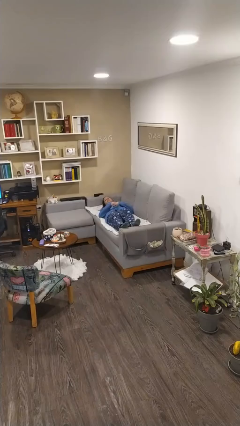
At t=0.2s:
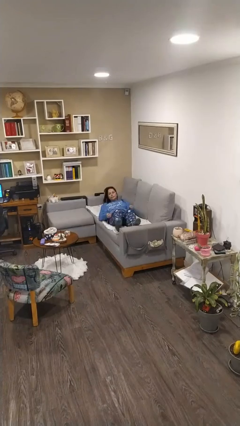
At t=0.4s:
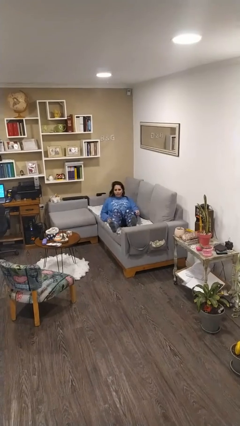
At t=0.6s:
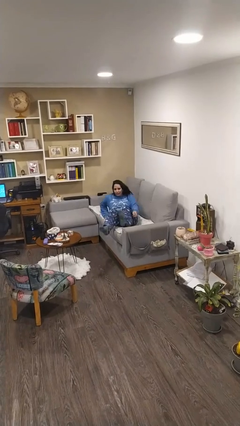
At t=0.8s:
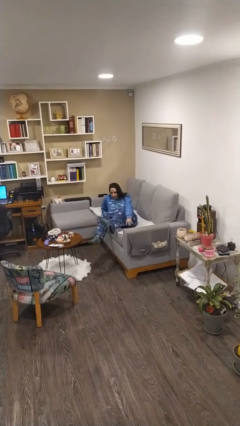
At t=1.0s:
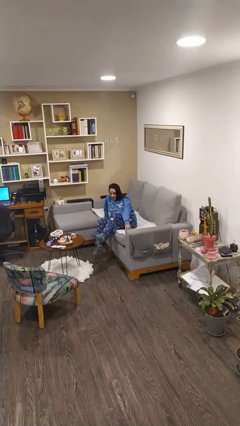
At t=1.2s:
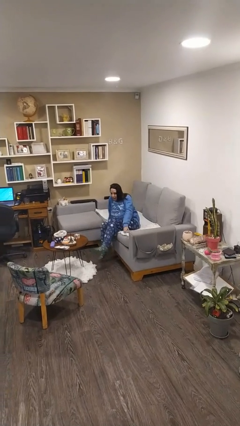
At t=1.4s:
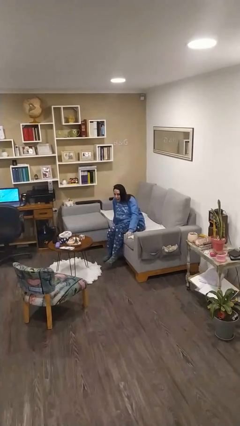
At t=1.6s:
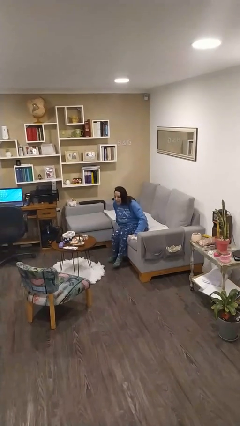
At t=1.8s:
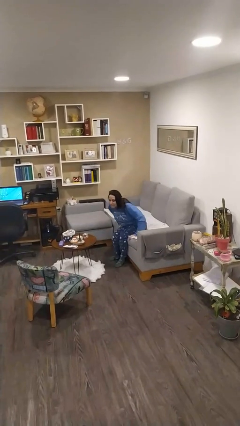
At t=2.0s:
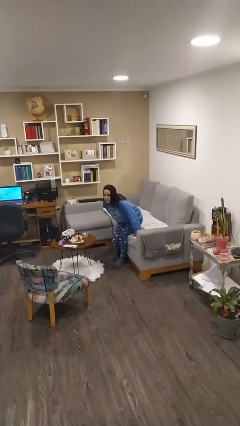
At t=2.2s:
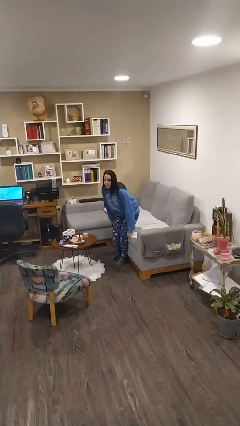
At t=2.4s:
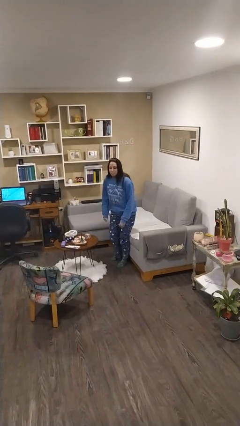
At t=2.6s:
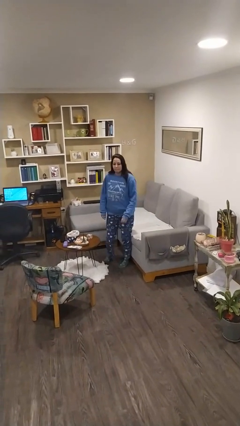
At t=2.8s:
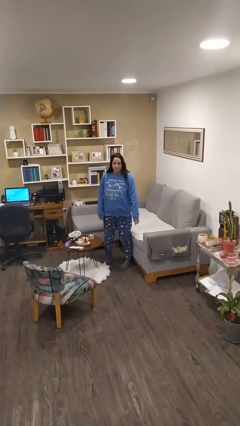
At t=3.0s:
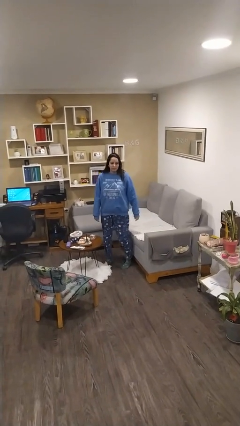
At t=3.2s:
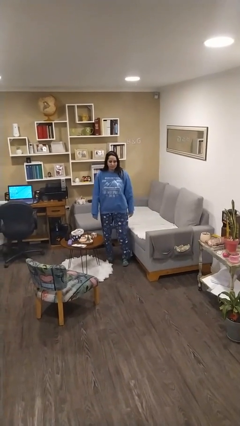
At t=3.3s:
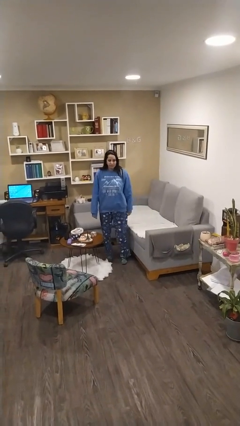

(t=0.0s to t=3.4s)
person stands up

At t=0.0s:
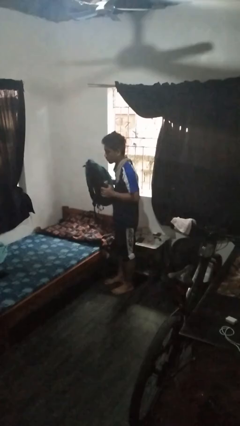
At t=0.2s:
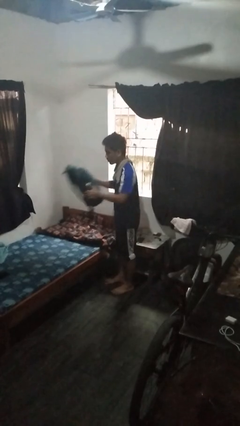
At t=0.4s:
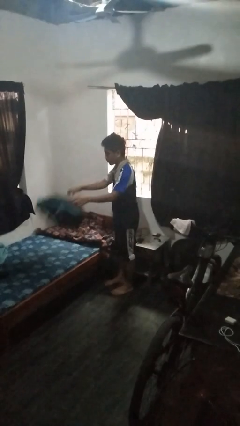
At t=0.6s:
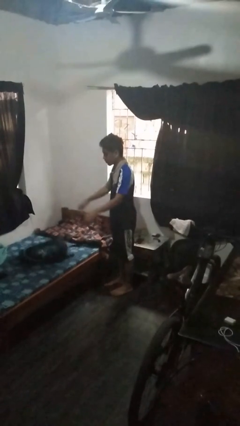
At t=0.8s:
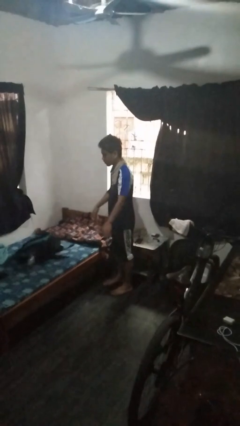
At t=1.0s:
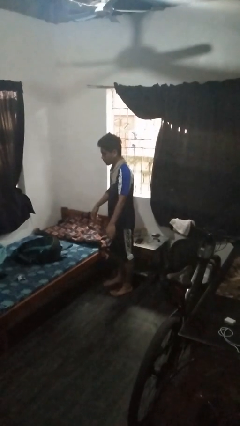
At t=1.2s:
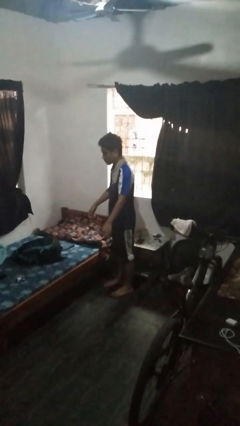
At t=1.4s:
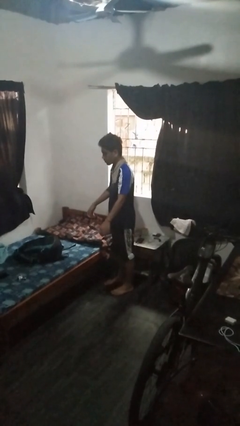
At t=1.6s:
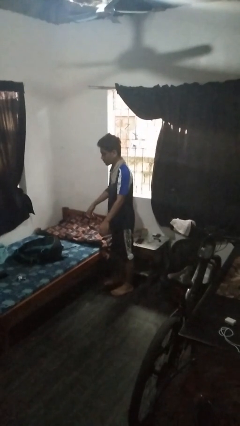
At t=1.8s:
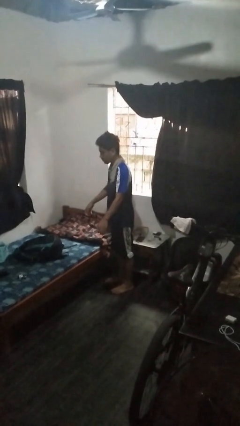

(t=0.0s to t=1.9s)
person throws object on bed

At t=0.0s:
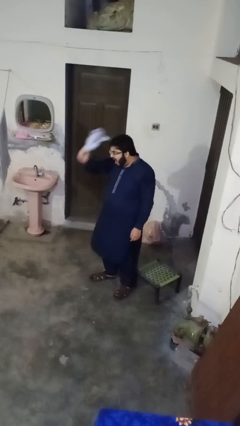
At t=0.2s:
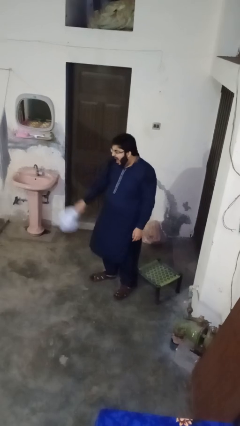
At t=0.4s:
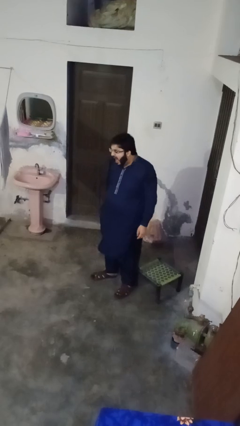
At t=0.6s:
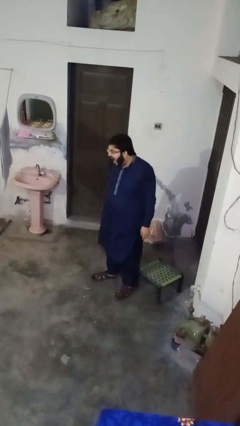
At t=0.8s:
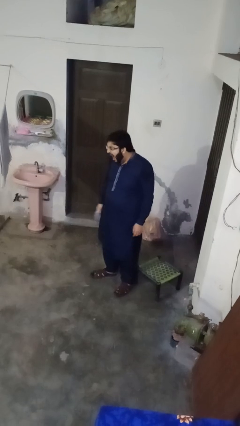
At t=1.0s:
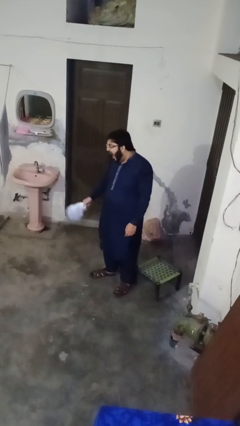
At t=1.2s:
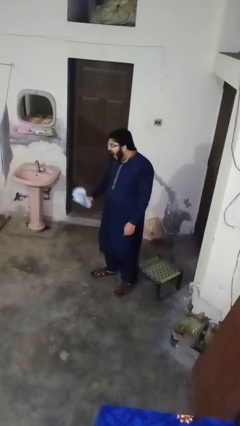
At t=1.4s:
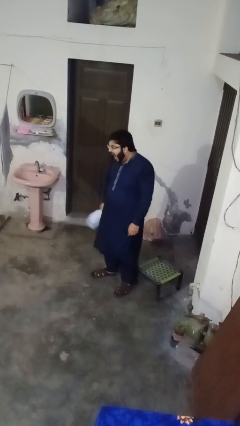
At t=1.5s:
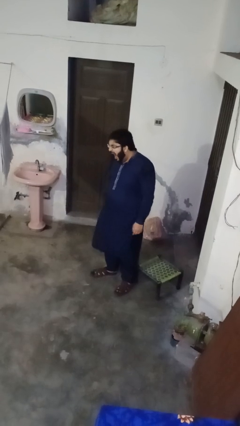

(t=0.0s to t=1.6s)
person takes off hat

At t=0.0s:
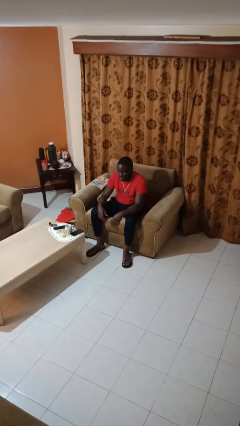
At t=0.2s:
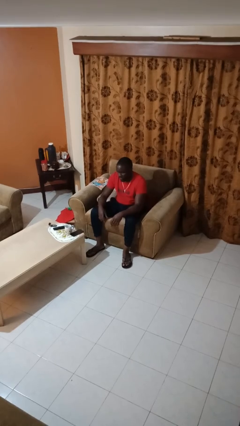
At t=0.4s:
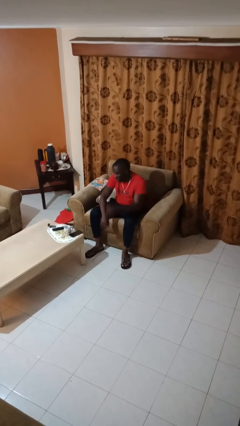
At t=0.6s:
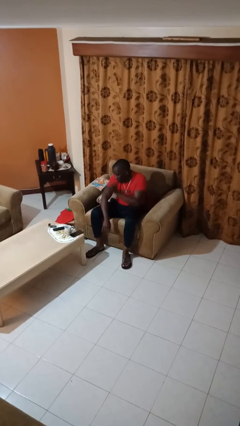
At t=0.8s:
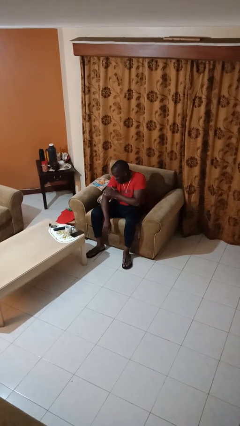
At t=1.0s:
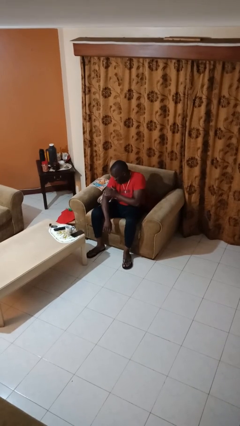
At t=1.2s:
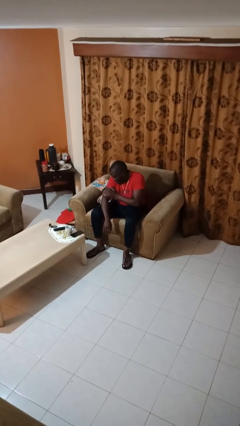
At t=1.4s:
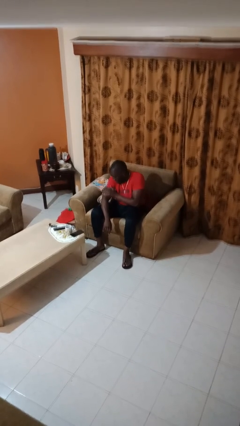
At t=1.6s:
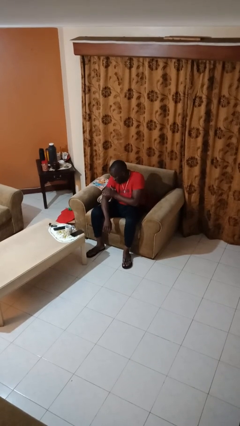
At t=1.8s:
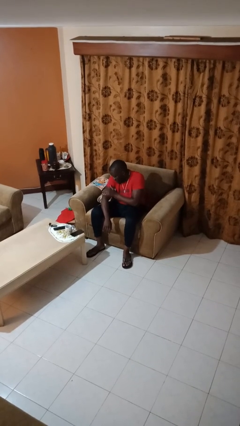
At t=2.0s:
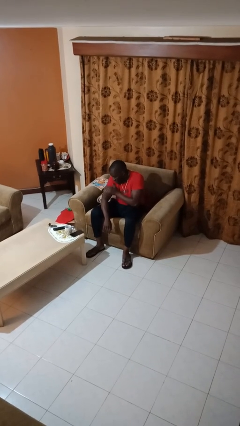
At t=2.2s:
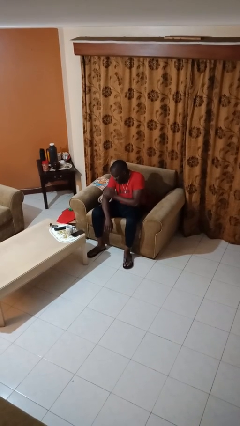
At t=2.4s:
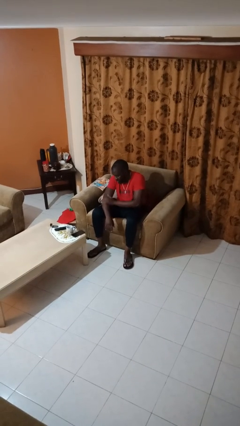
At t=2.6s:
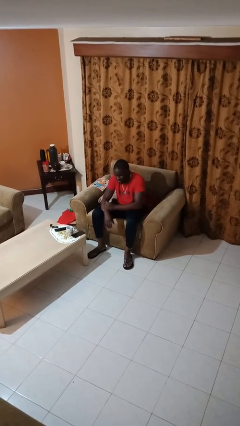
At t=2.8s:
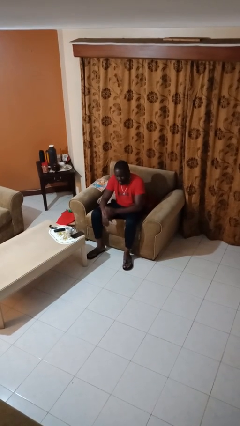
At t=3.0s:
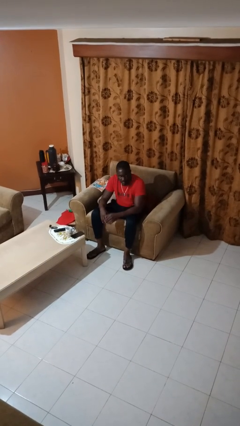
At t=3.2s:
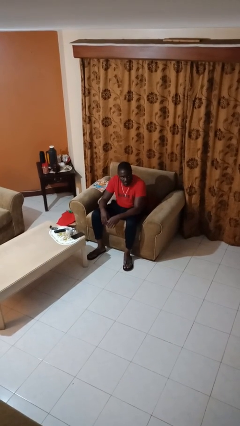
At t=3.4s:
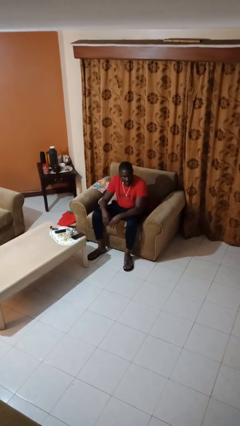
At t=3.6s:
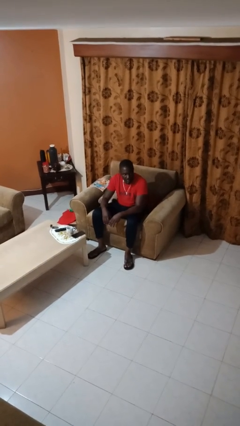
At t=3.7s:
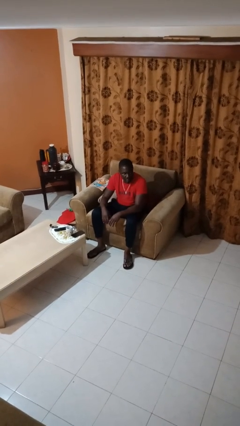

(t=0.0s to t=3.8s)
person swats bug

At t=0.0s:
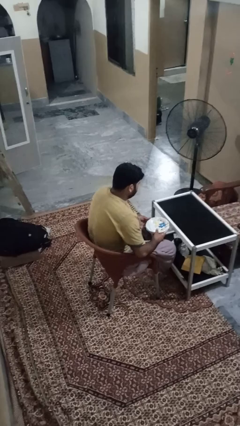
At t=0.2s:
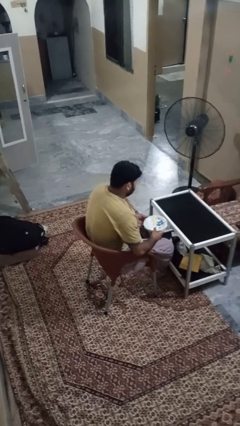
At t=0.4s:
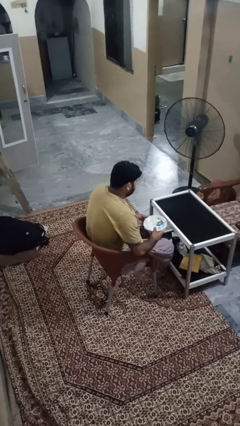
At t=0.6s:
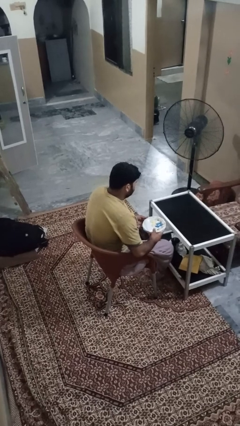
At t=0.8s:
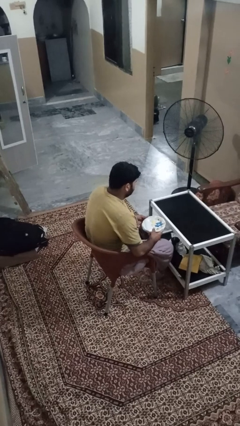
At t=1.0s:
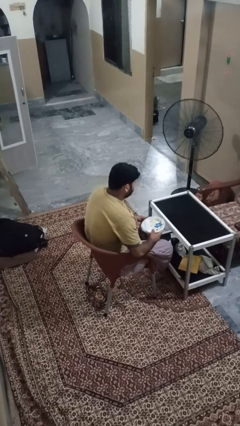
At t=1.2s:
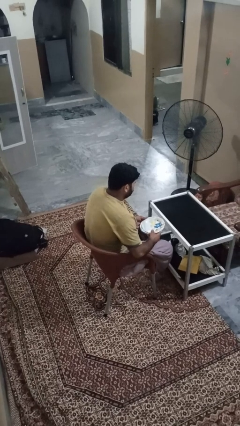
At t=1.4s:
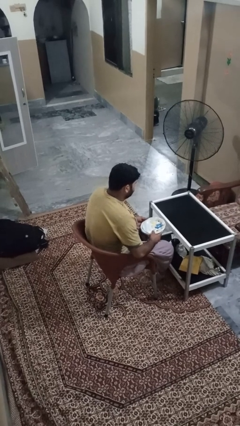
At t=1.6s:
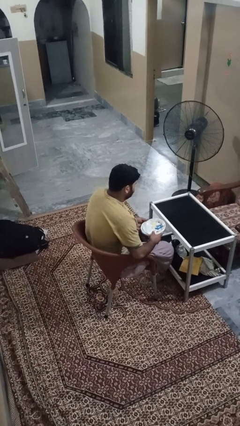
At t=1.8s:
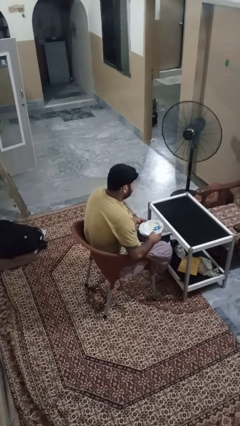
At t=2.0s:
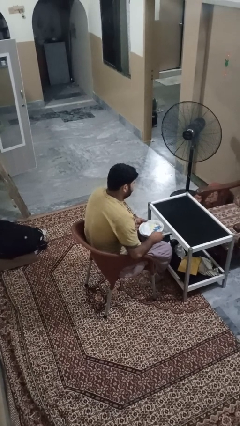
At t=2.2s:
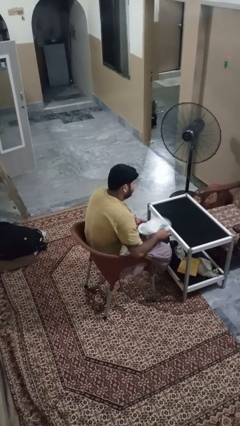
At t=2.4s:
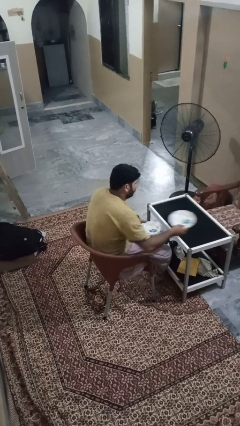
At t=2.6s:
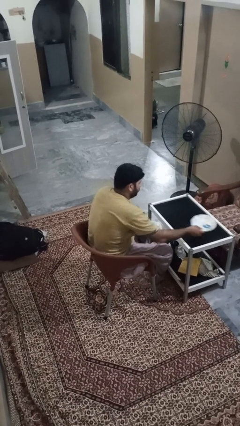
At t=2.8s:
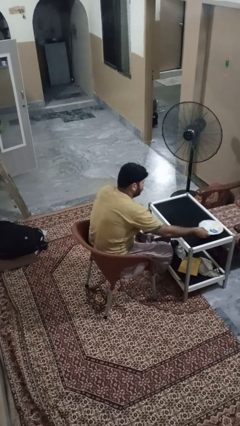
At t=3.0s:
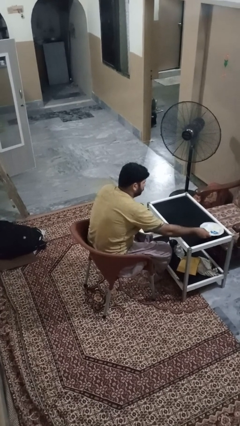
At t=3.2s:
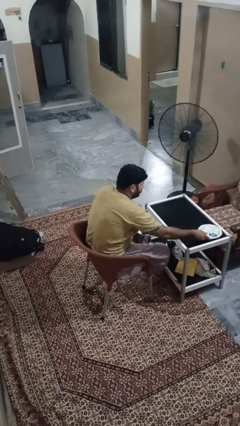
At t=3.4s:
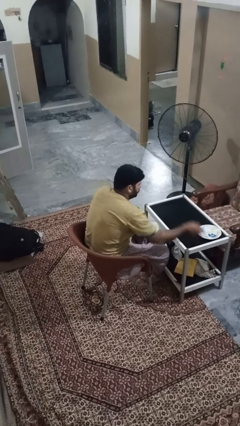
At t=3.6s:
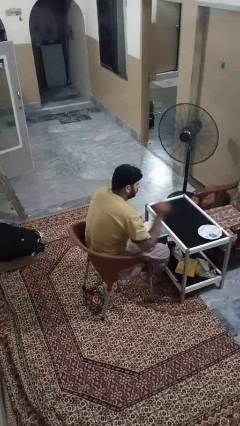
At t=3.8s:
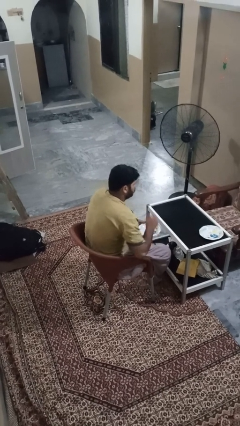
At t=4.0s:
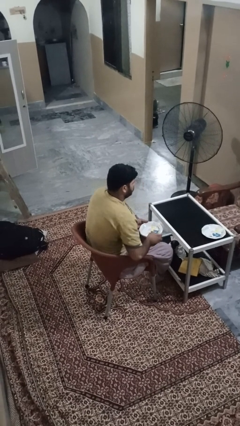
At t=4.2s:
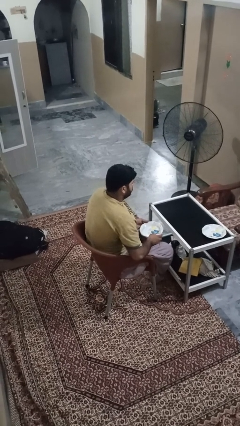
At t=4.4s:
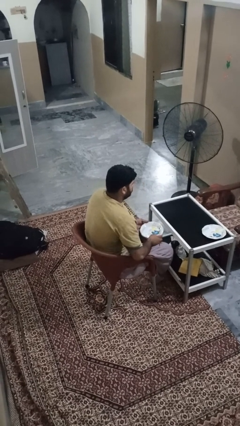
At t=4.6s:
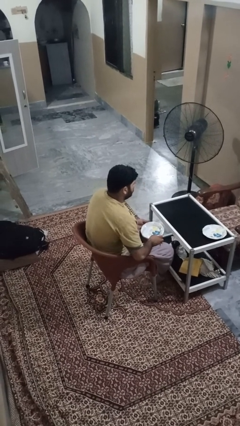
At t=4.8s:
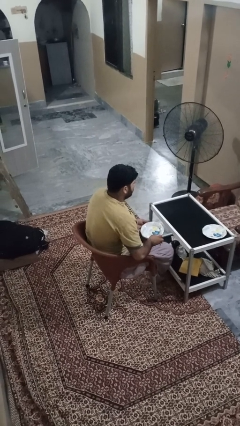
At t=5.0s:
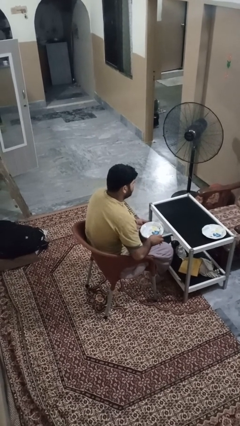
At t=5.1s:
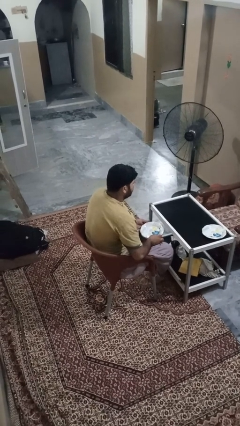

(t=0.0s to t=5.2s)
person sets table

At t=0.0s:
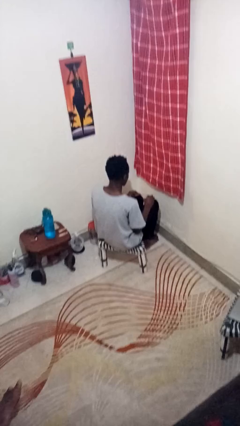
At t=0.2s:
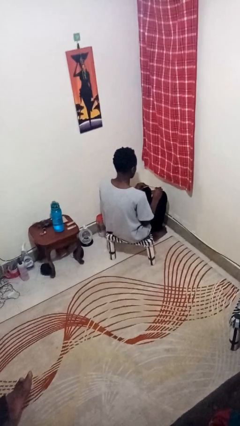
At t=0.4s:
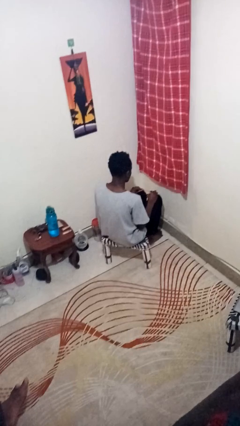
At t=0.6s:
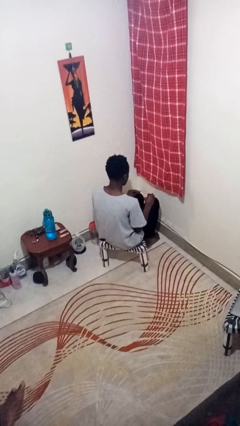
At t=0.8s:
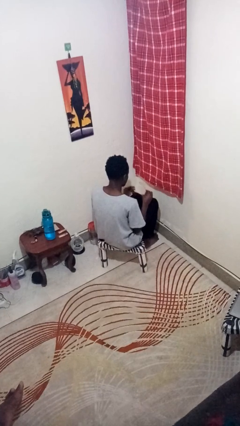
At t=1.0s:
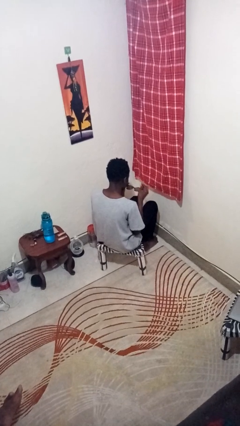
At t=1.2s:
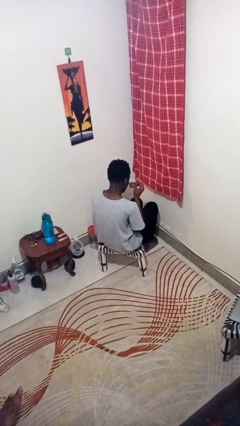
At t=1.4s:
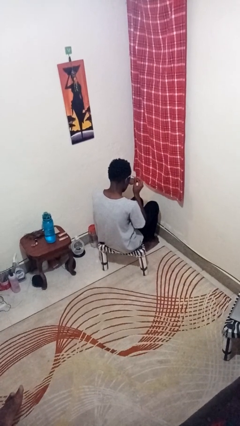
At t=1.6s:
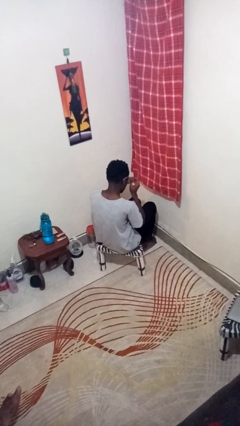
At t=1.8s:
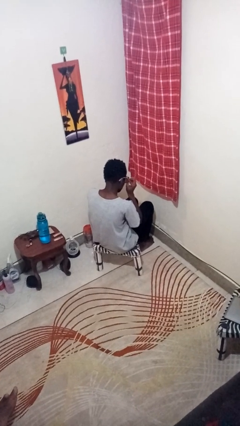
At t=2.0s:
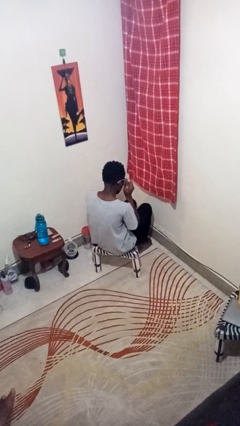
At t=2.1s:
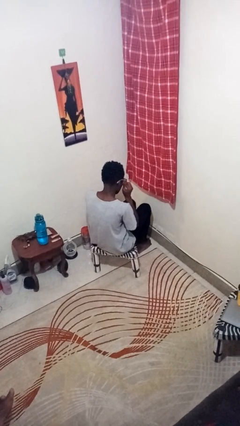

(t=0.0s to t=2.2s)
person puts on glasses
